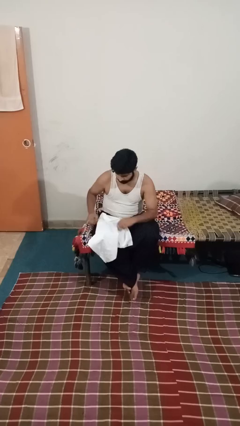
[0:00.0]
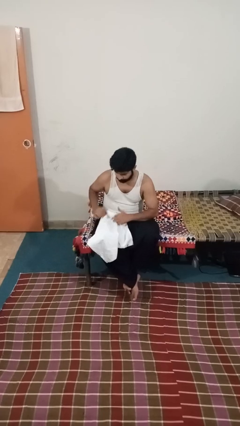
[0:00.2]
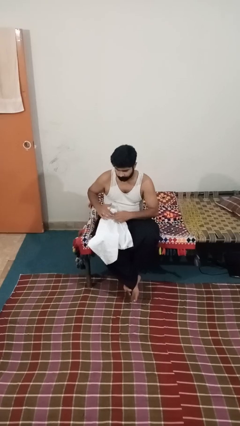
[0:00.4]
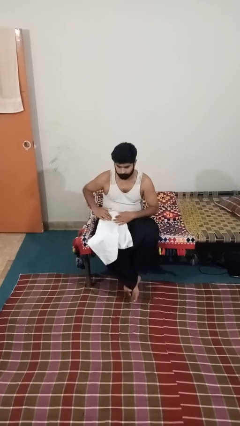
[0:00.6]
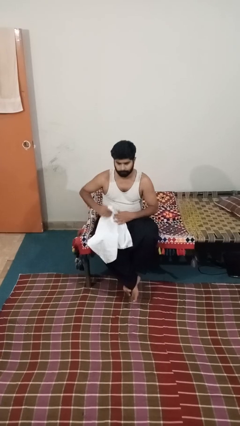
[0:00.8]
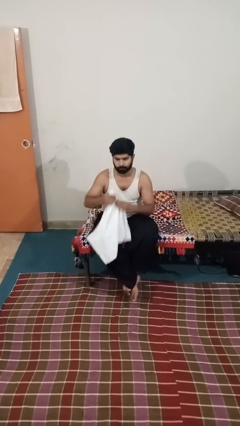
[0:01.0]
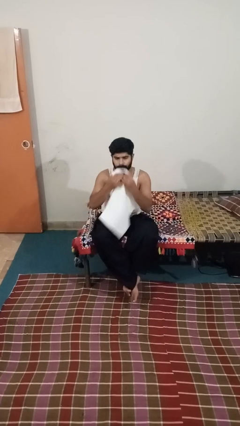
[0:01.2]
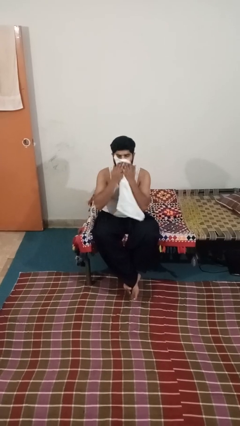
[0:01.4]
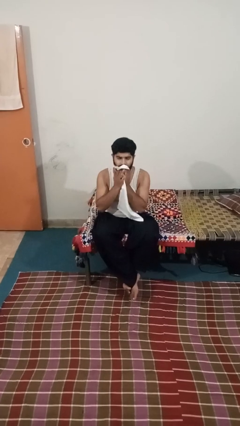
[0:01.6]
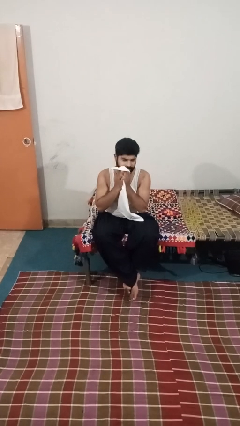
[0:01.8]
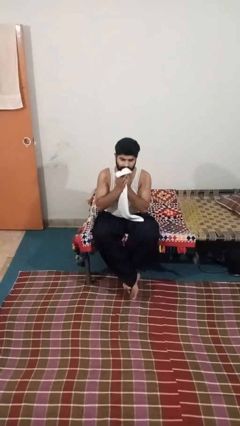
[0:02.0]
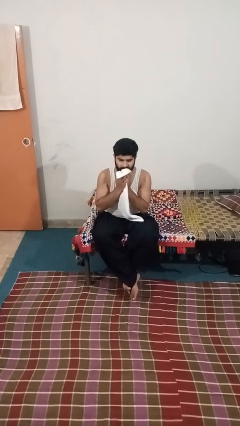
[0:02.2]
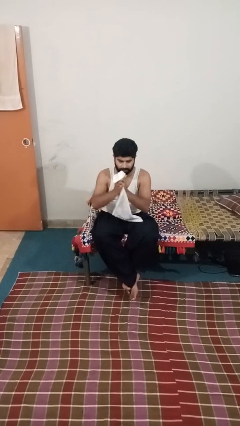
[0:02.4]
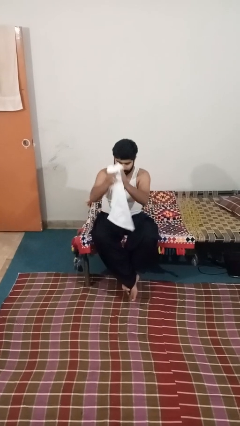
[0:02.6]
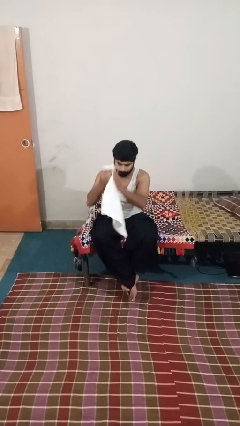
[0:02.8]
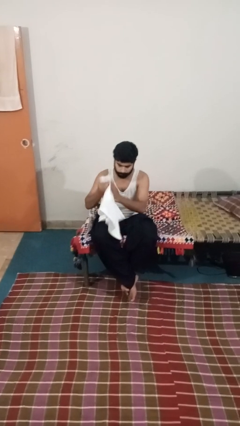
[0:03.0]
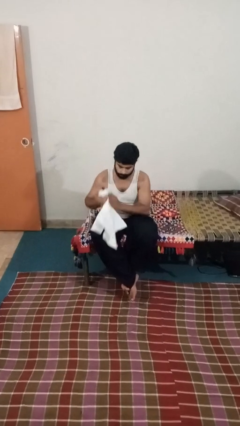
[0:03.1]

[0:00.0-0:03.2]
person wipes mouth with napkin

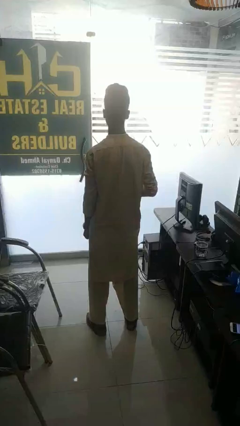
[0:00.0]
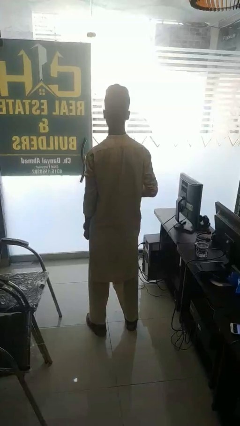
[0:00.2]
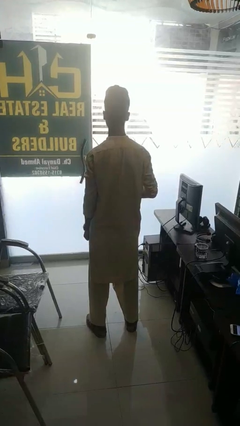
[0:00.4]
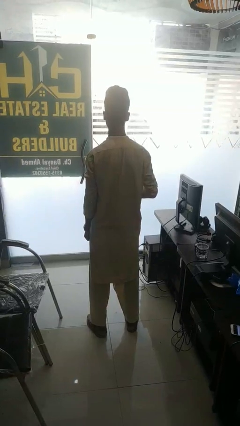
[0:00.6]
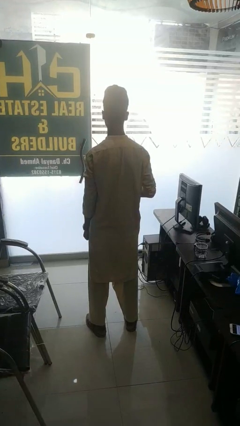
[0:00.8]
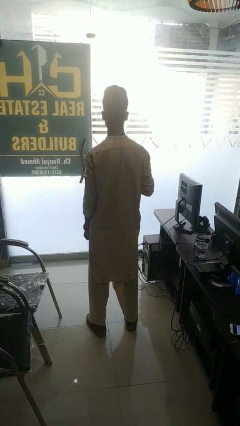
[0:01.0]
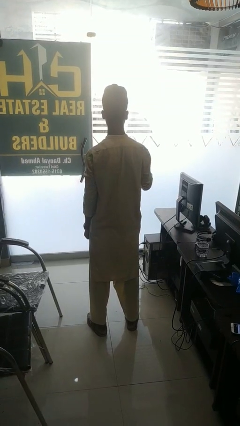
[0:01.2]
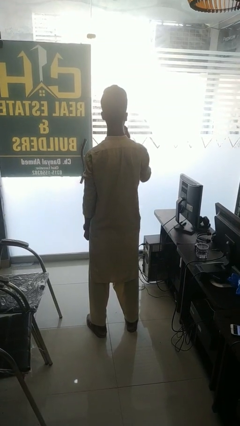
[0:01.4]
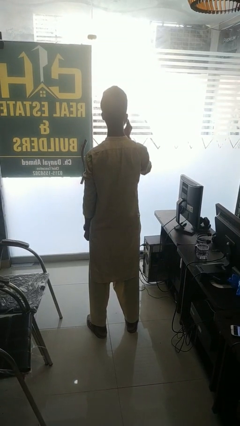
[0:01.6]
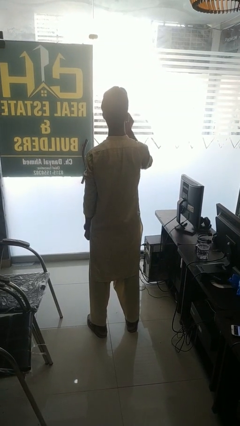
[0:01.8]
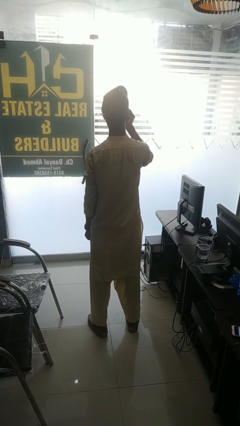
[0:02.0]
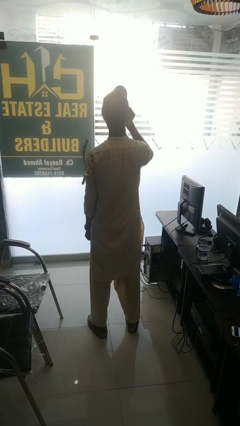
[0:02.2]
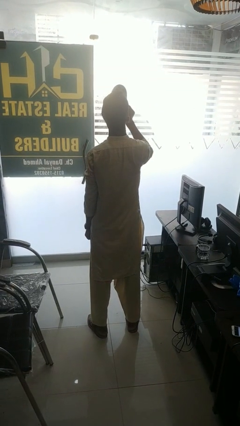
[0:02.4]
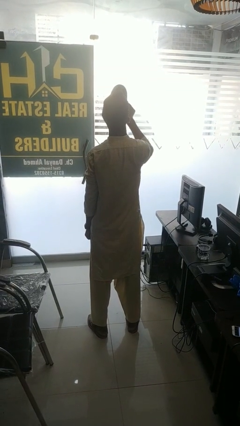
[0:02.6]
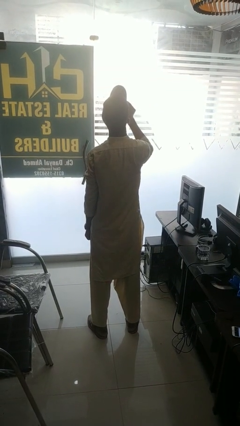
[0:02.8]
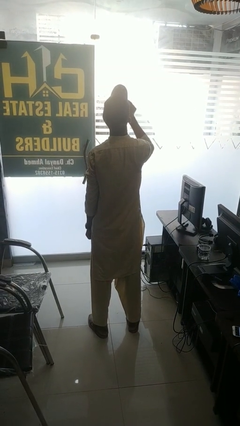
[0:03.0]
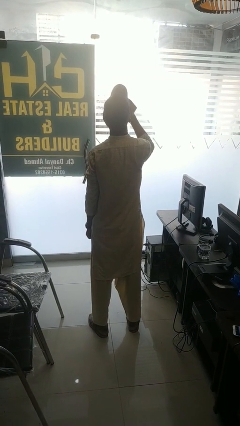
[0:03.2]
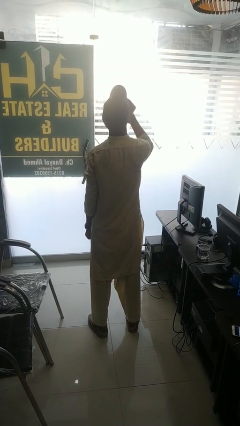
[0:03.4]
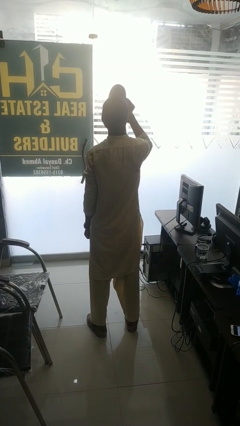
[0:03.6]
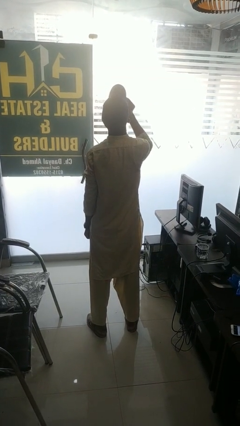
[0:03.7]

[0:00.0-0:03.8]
person drinks from bottle

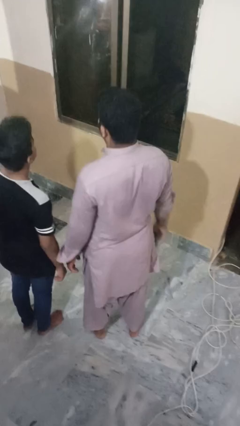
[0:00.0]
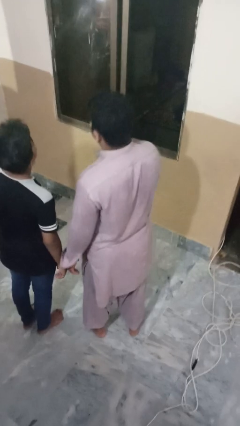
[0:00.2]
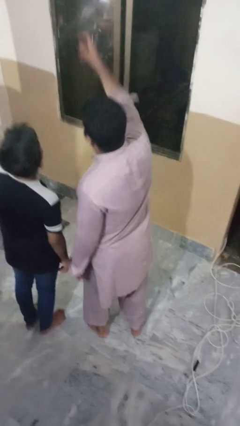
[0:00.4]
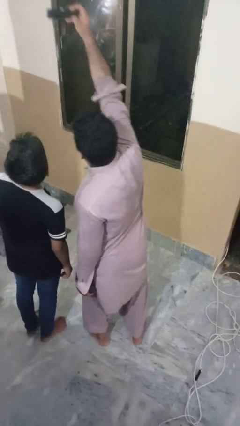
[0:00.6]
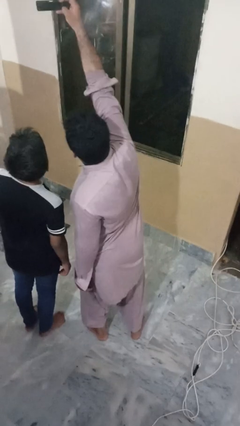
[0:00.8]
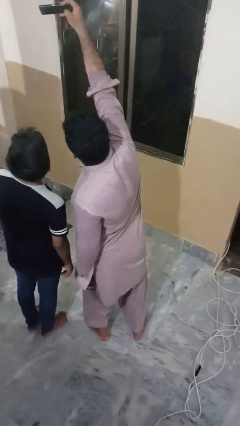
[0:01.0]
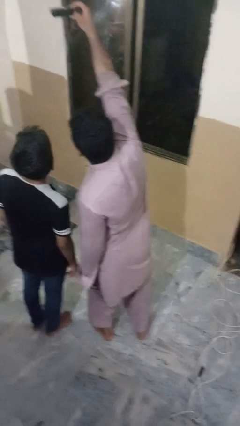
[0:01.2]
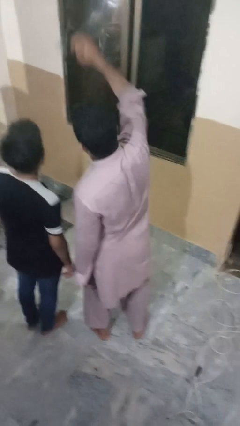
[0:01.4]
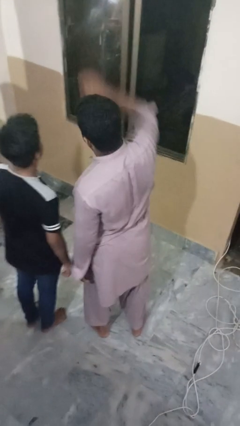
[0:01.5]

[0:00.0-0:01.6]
person takes selfie with person

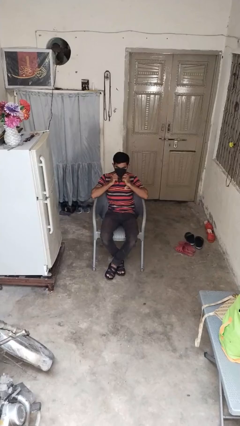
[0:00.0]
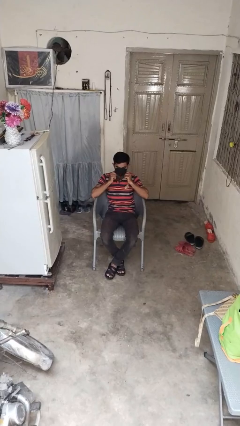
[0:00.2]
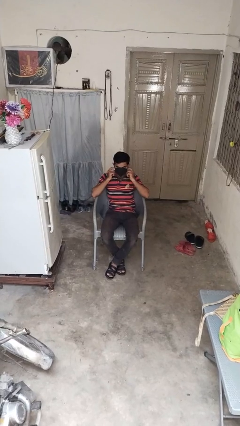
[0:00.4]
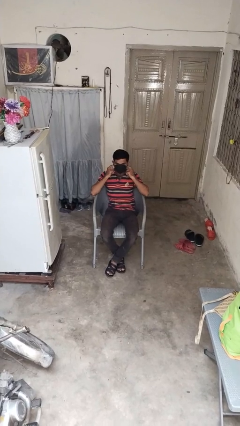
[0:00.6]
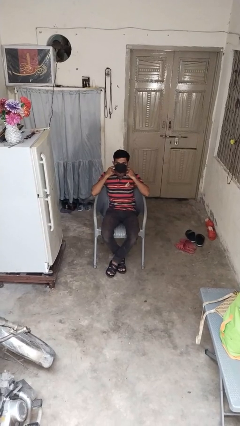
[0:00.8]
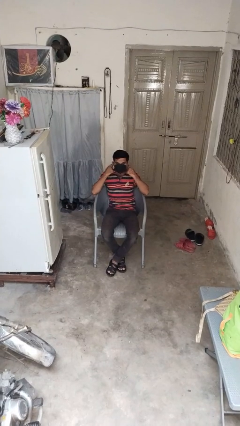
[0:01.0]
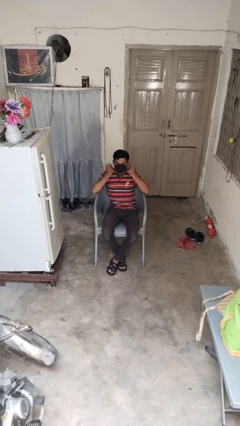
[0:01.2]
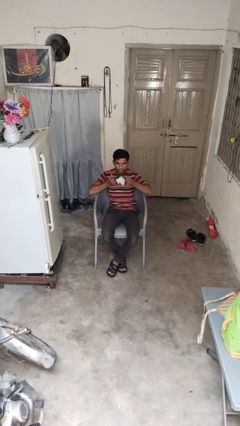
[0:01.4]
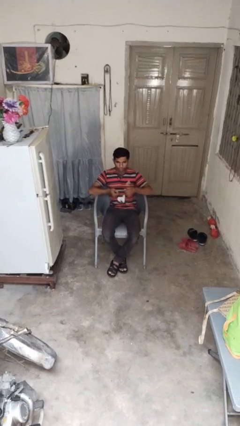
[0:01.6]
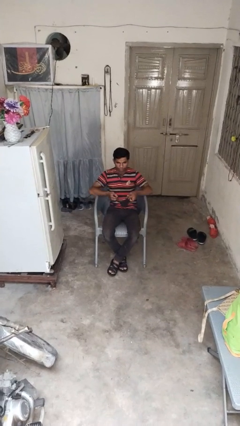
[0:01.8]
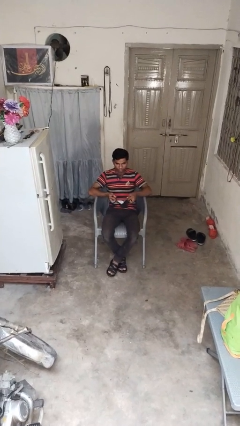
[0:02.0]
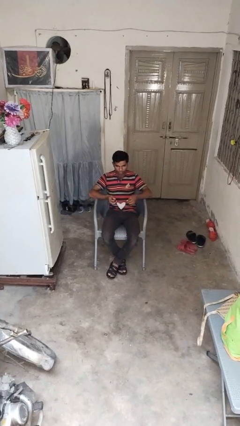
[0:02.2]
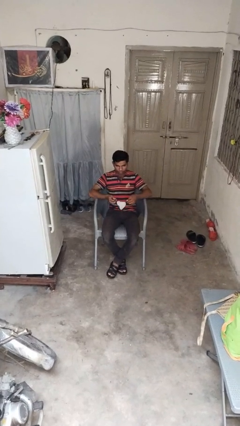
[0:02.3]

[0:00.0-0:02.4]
person takes off facemask

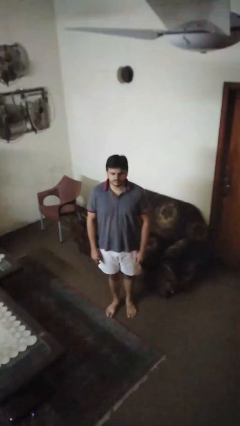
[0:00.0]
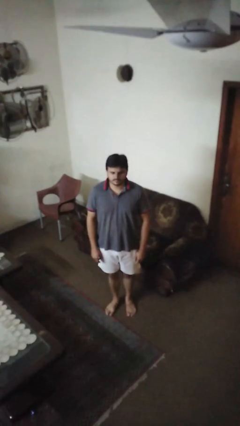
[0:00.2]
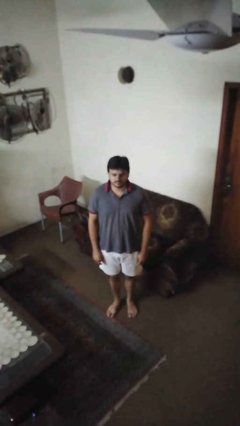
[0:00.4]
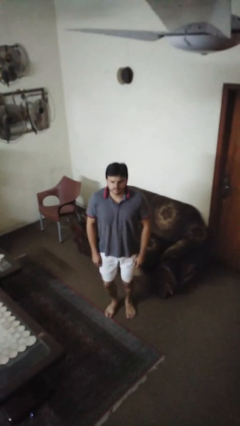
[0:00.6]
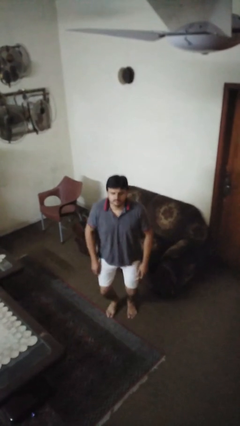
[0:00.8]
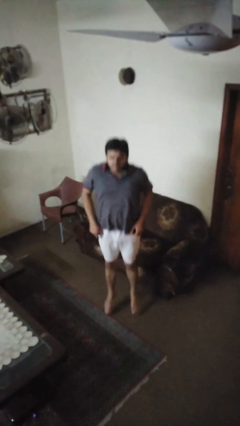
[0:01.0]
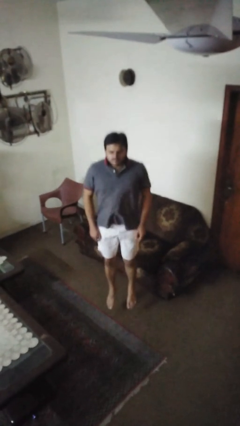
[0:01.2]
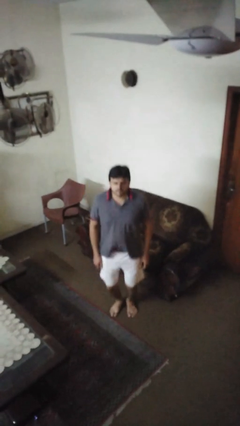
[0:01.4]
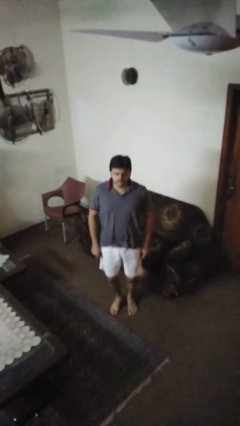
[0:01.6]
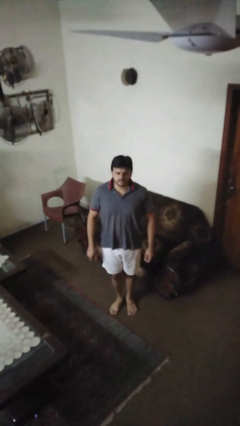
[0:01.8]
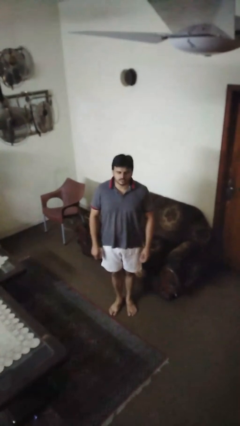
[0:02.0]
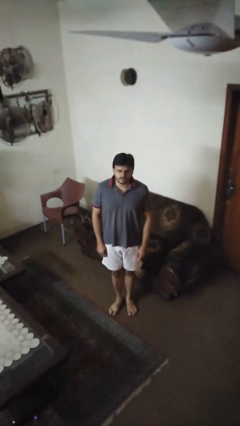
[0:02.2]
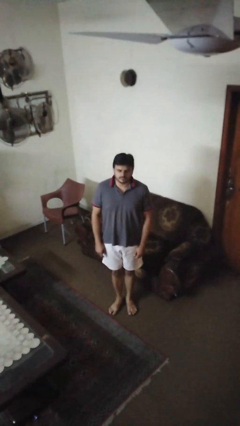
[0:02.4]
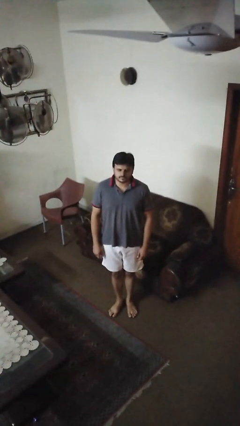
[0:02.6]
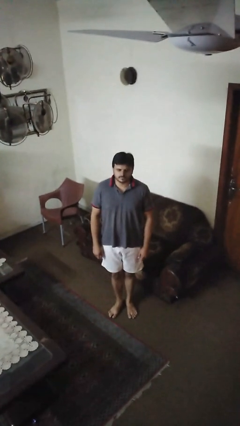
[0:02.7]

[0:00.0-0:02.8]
person jumps

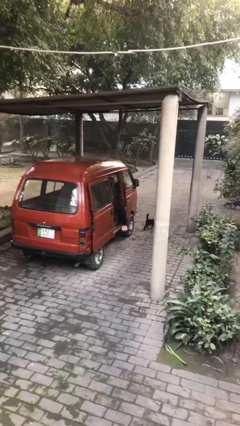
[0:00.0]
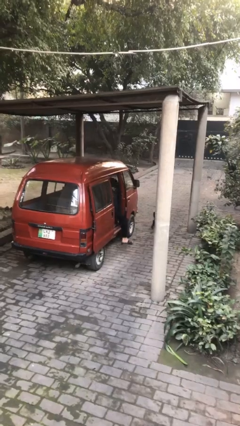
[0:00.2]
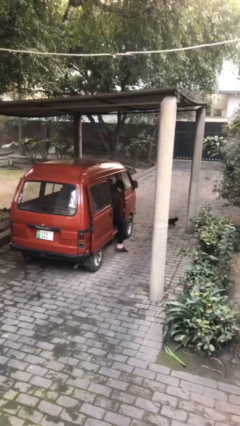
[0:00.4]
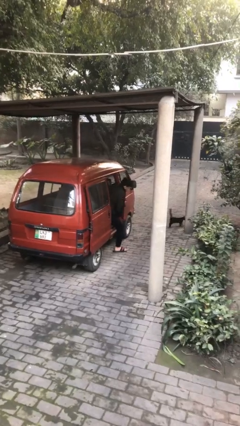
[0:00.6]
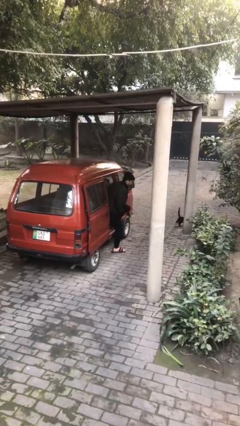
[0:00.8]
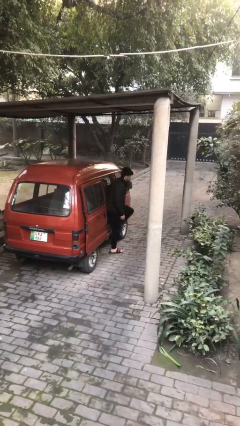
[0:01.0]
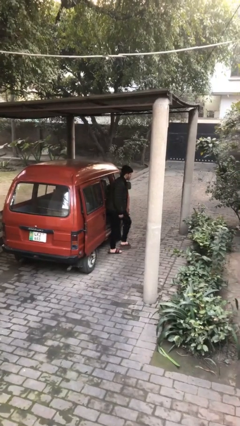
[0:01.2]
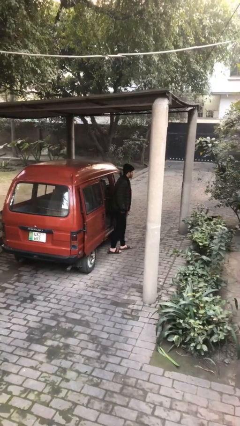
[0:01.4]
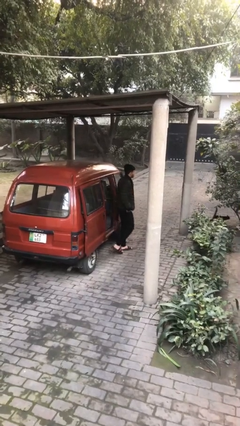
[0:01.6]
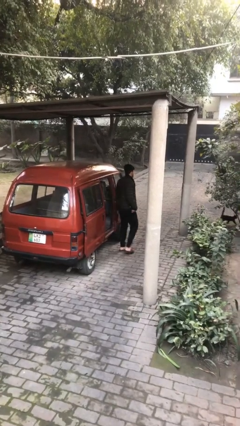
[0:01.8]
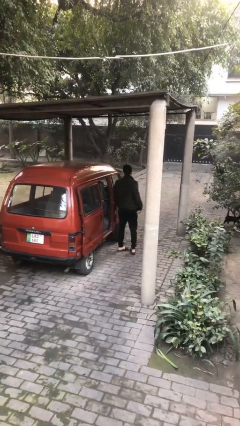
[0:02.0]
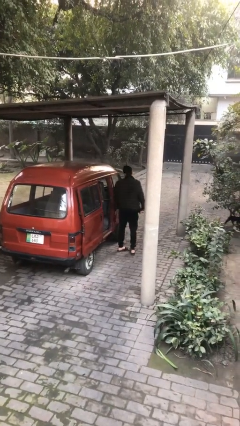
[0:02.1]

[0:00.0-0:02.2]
person exits car

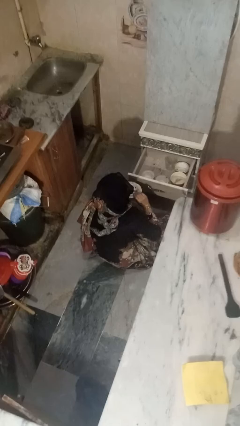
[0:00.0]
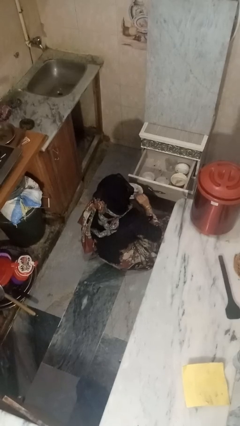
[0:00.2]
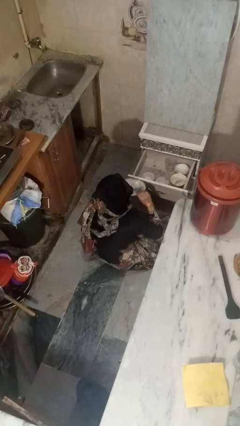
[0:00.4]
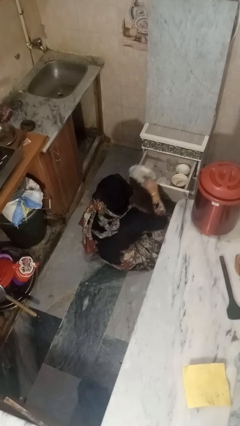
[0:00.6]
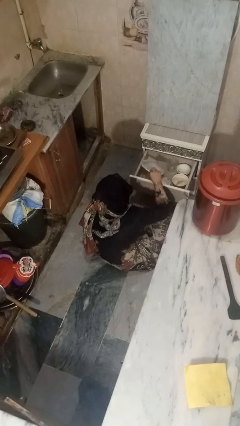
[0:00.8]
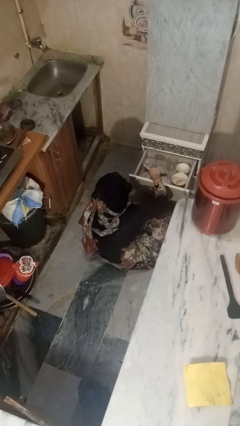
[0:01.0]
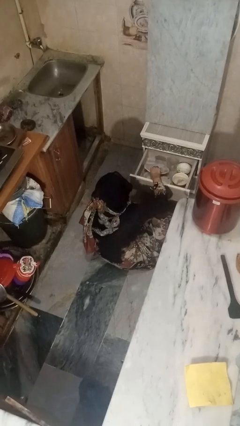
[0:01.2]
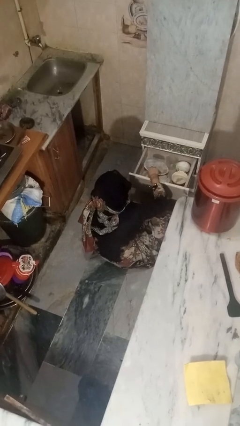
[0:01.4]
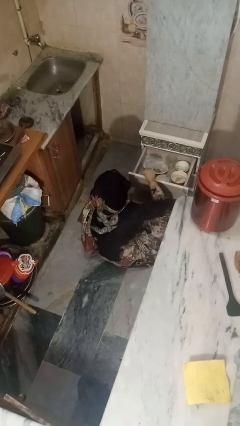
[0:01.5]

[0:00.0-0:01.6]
person puts object into kitchen drawer
